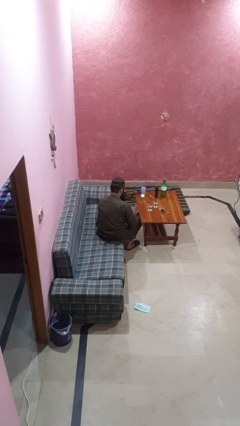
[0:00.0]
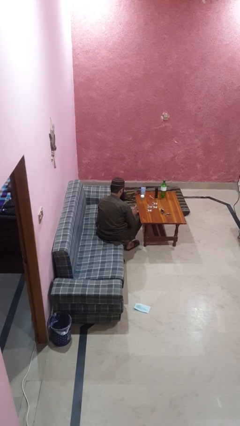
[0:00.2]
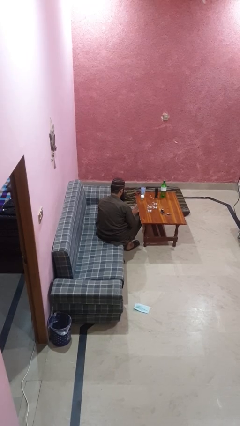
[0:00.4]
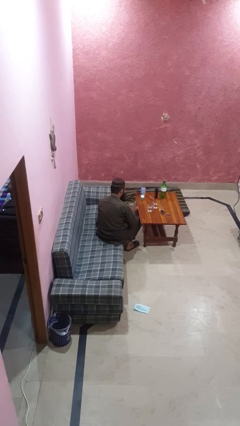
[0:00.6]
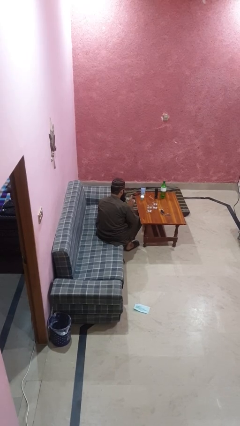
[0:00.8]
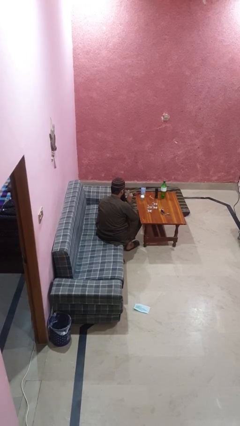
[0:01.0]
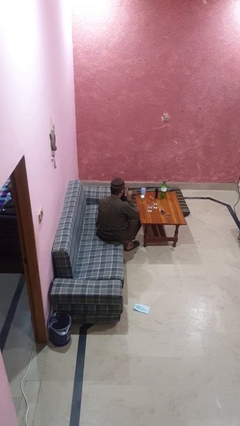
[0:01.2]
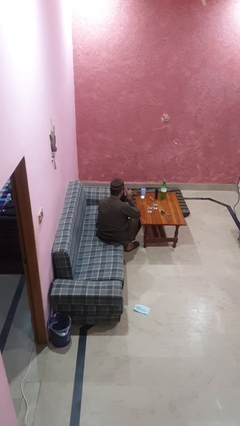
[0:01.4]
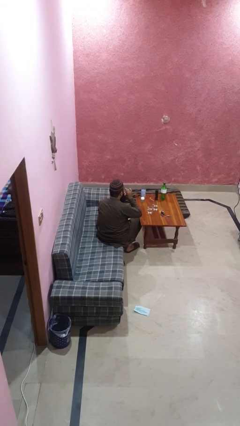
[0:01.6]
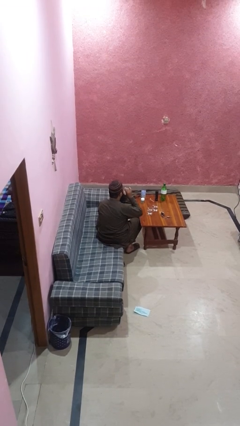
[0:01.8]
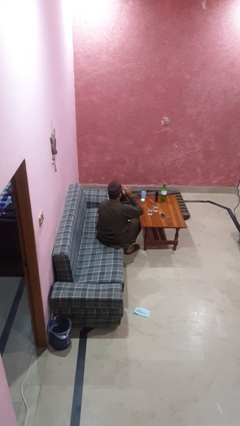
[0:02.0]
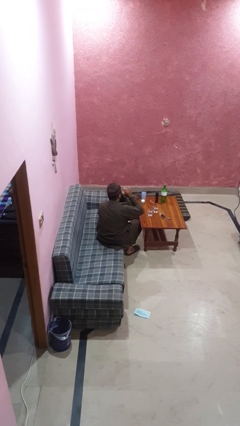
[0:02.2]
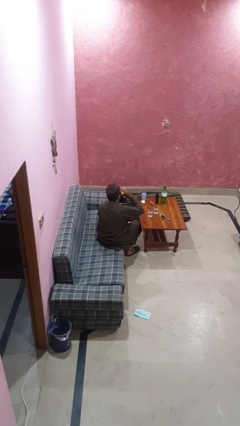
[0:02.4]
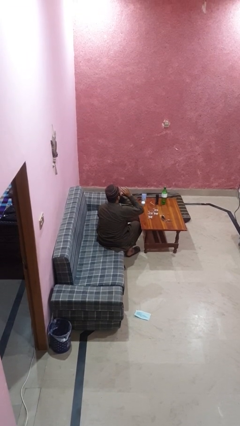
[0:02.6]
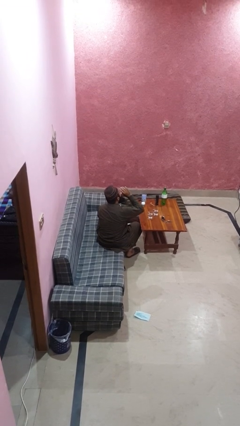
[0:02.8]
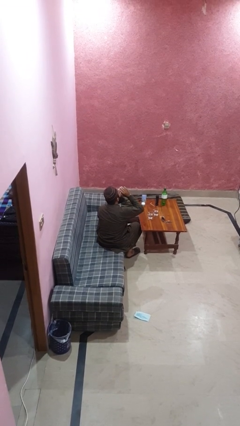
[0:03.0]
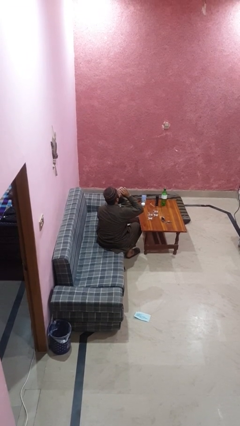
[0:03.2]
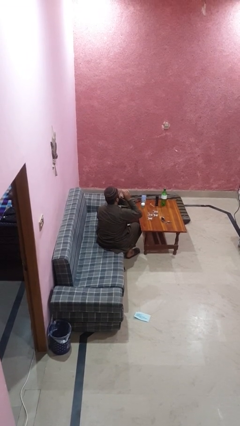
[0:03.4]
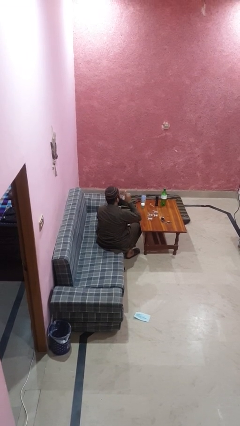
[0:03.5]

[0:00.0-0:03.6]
person drinks from shotglass

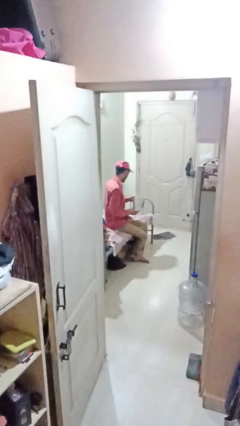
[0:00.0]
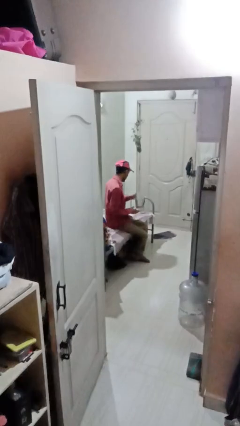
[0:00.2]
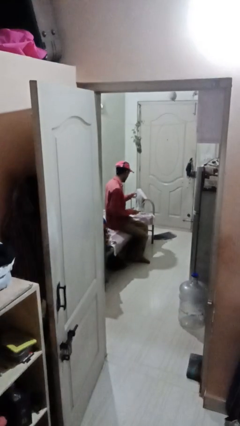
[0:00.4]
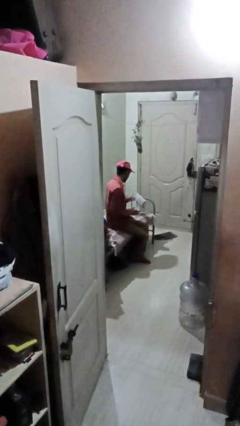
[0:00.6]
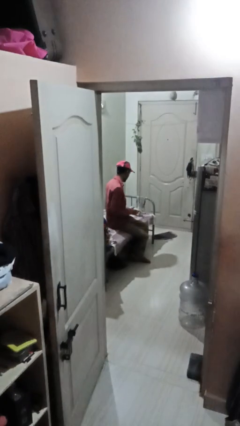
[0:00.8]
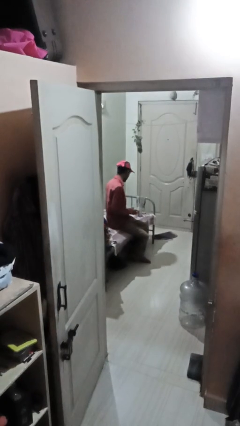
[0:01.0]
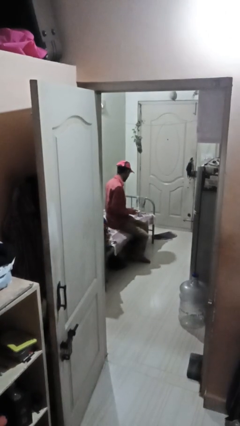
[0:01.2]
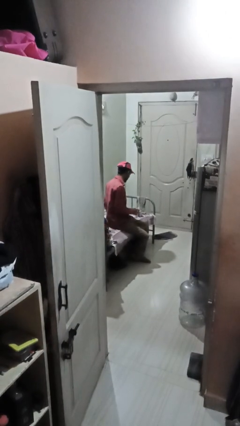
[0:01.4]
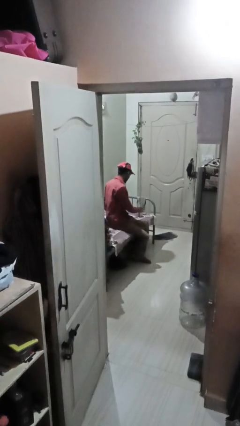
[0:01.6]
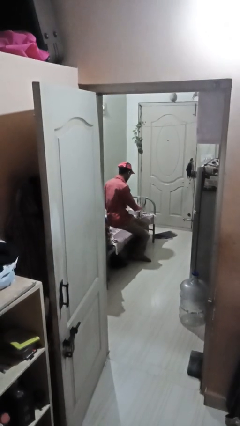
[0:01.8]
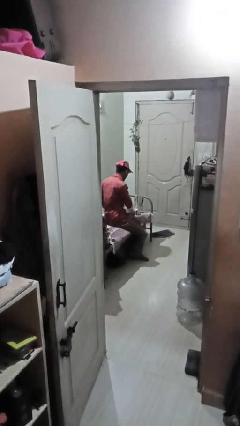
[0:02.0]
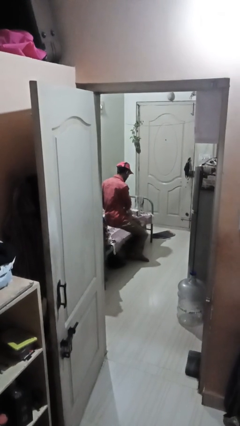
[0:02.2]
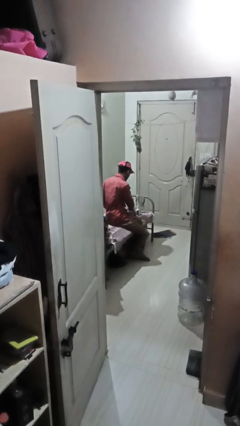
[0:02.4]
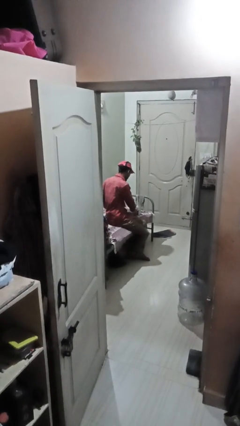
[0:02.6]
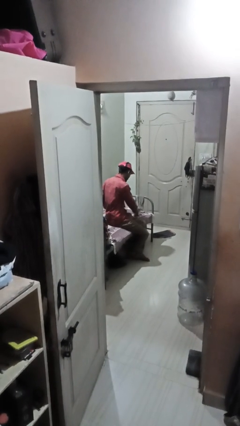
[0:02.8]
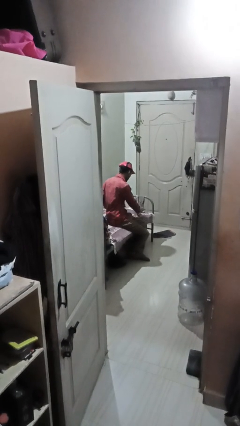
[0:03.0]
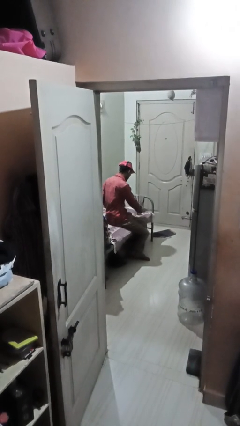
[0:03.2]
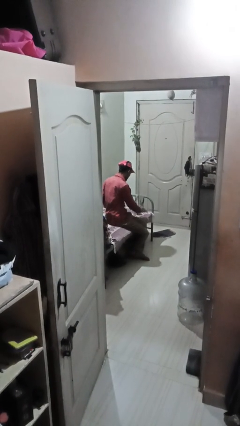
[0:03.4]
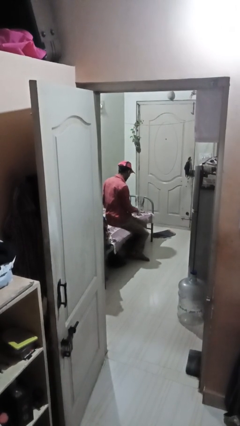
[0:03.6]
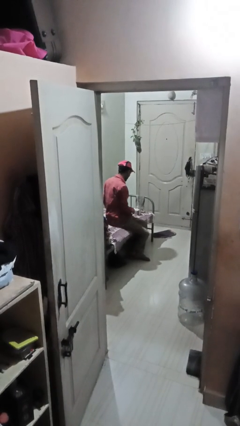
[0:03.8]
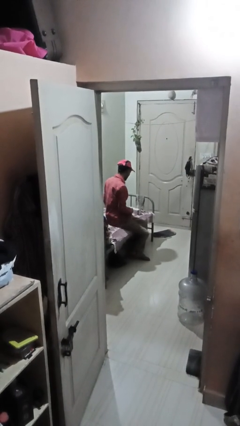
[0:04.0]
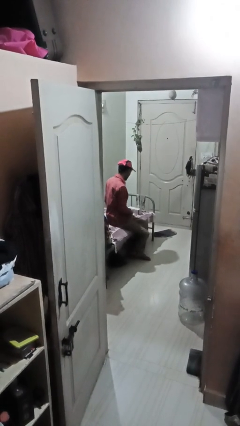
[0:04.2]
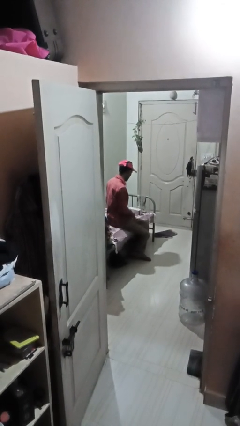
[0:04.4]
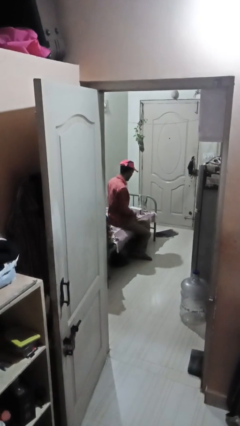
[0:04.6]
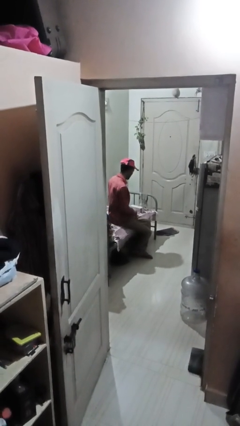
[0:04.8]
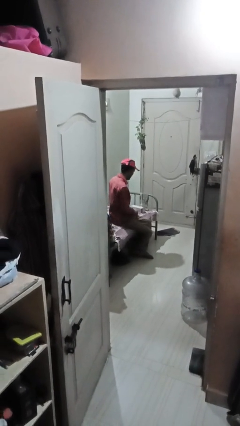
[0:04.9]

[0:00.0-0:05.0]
person waves hand over object

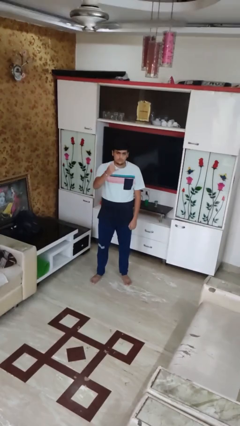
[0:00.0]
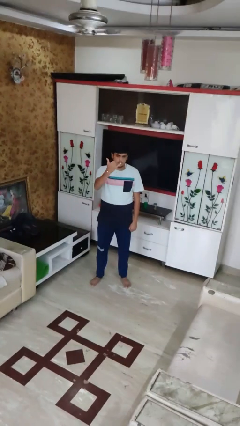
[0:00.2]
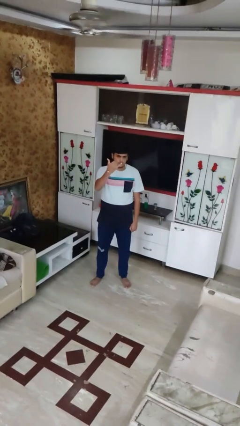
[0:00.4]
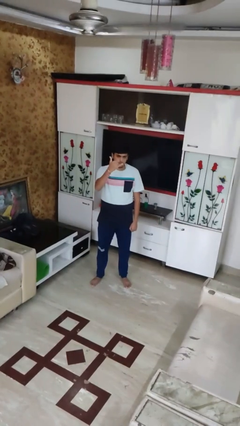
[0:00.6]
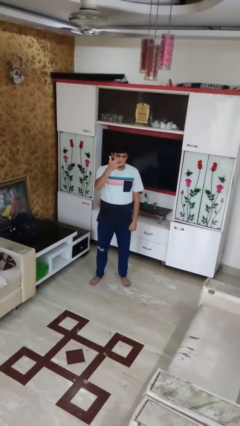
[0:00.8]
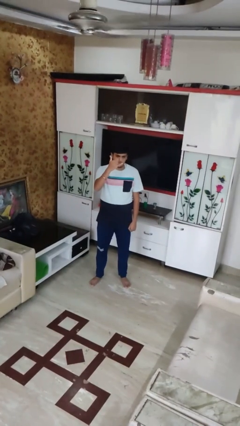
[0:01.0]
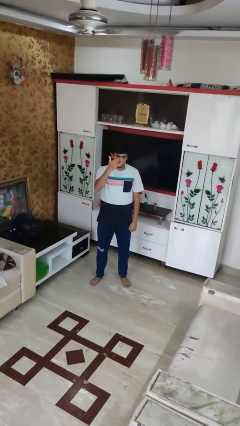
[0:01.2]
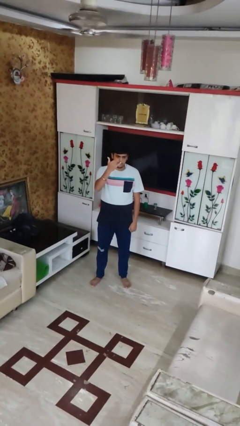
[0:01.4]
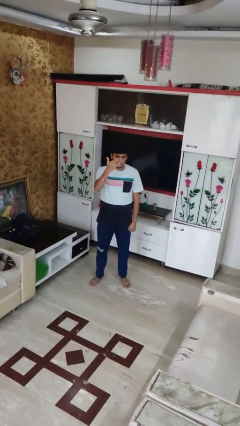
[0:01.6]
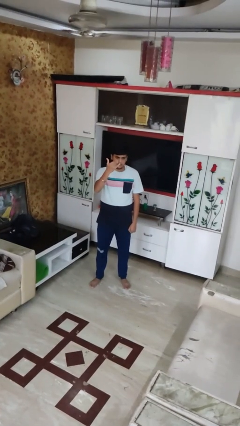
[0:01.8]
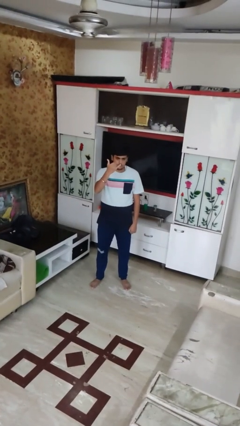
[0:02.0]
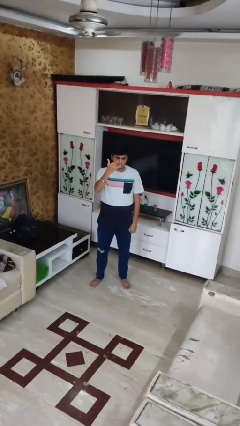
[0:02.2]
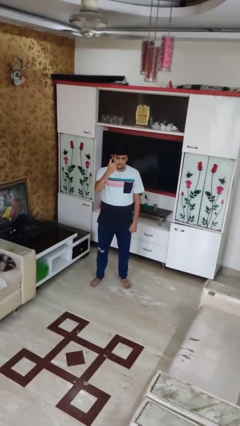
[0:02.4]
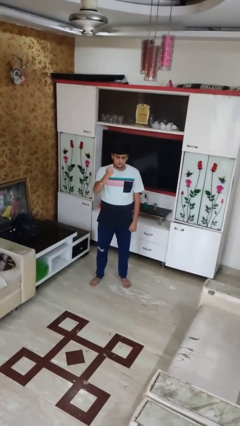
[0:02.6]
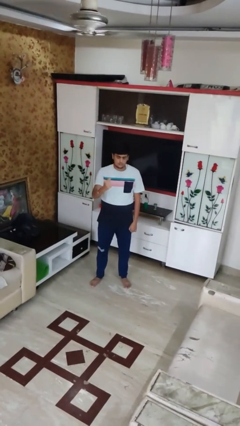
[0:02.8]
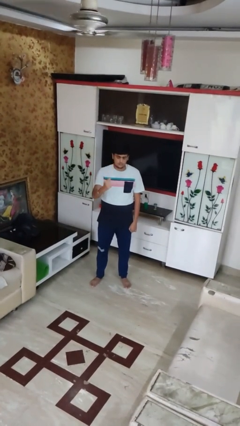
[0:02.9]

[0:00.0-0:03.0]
person gestures hang loose

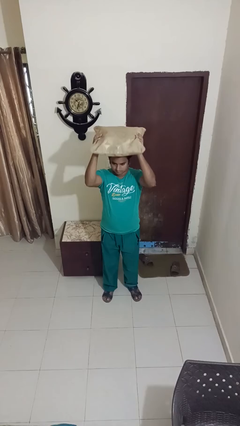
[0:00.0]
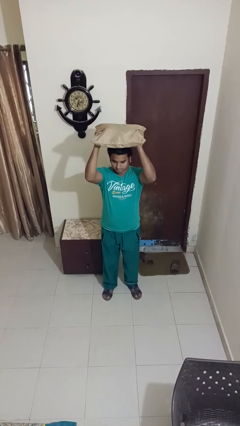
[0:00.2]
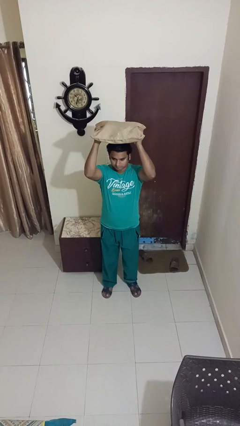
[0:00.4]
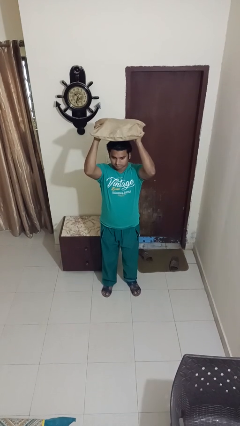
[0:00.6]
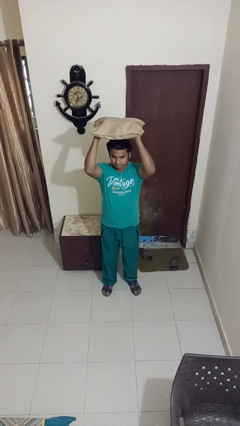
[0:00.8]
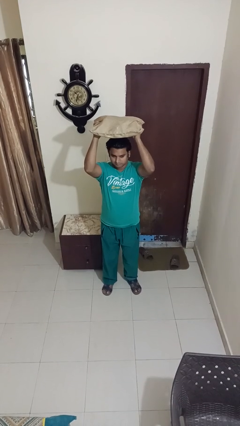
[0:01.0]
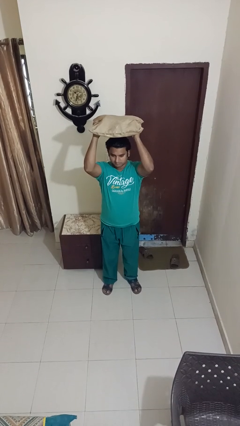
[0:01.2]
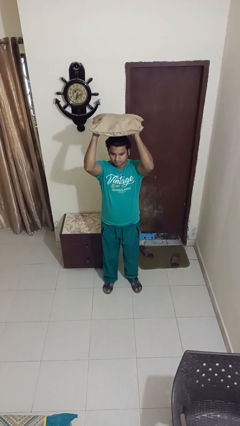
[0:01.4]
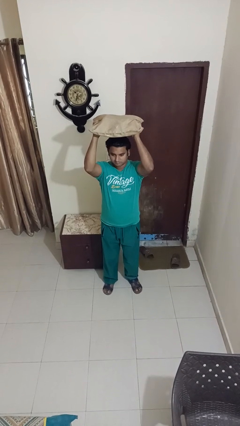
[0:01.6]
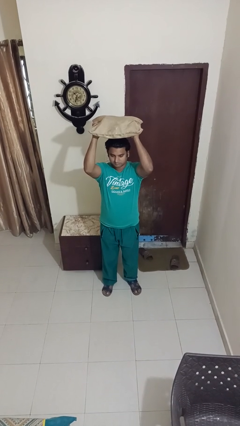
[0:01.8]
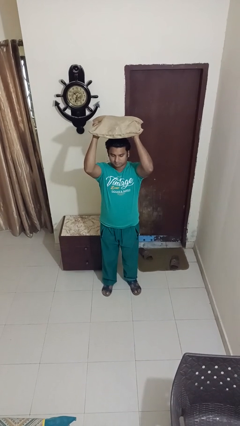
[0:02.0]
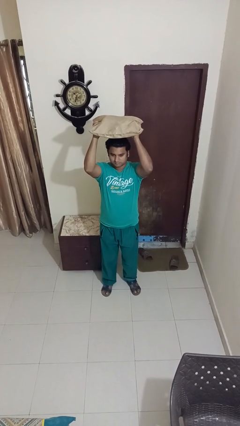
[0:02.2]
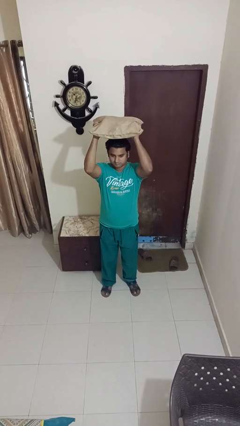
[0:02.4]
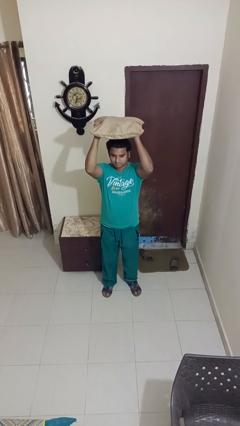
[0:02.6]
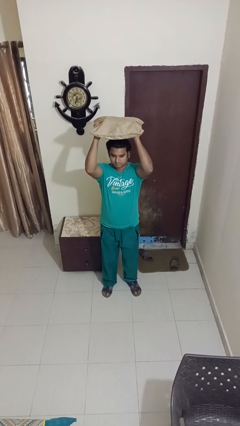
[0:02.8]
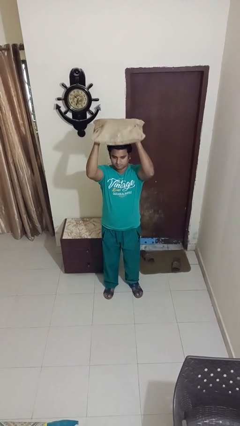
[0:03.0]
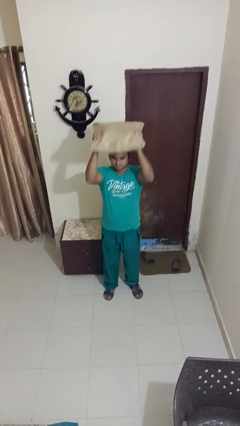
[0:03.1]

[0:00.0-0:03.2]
person holds object above head

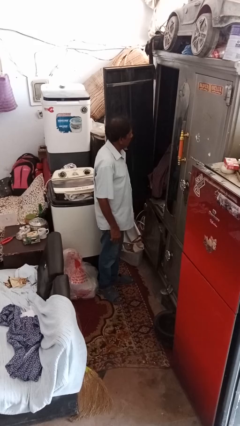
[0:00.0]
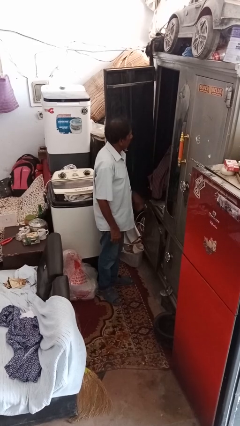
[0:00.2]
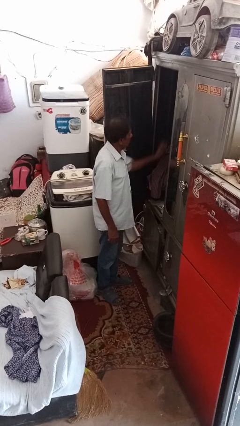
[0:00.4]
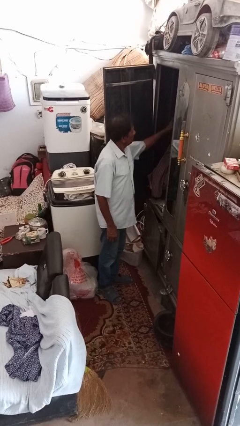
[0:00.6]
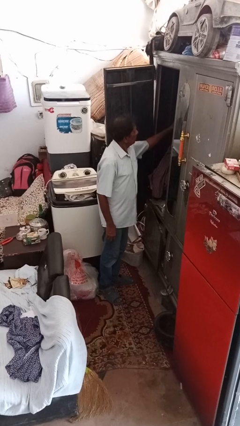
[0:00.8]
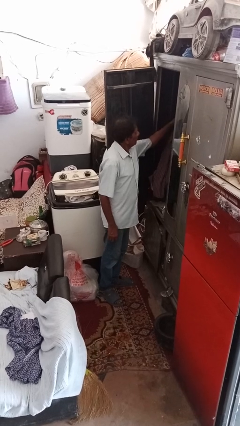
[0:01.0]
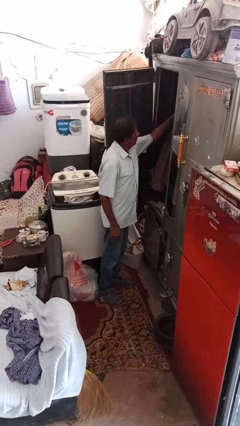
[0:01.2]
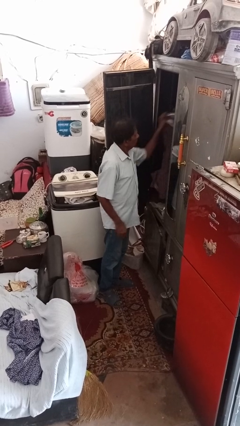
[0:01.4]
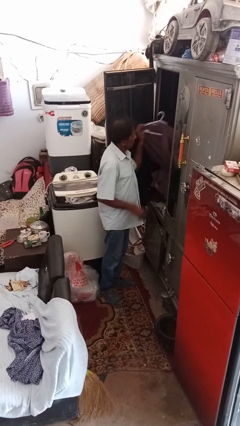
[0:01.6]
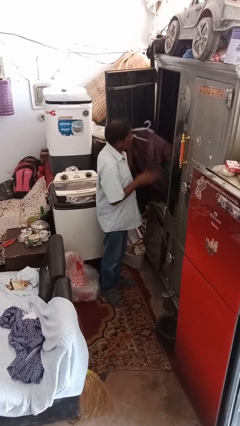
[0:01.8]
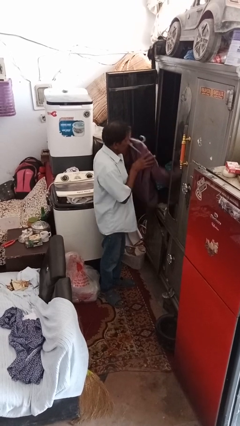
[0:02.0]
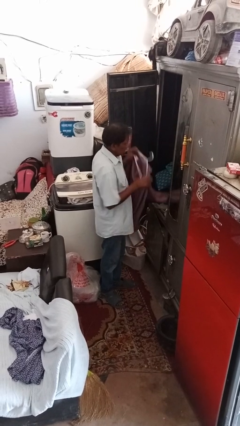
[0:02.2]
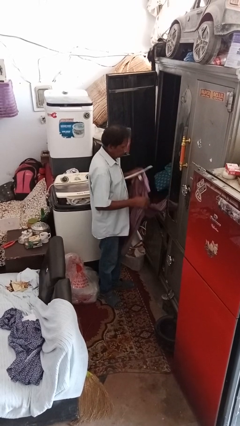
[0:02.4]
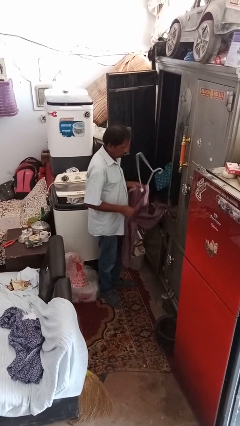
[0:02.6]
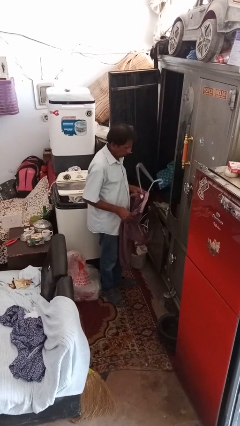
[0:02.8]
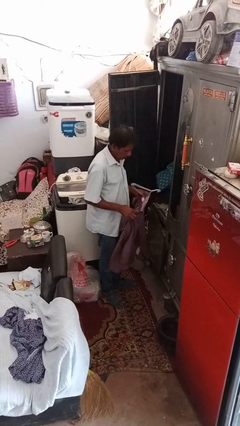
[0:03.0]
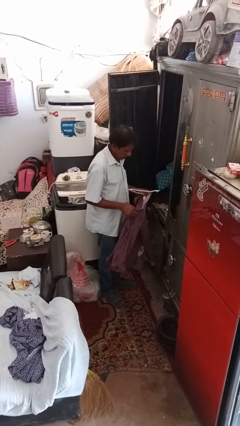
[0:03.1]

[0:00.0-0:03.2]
person takes clothes from closet
